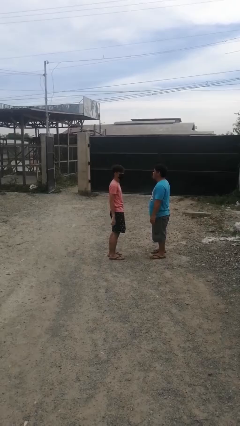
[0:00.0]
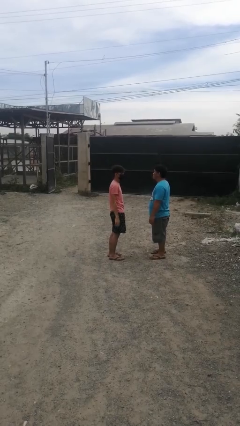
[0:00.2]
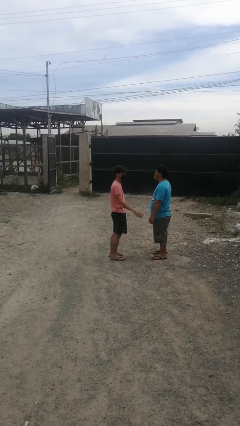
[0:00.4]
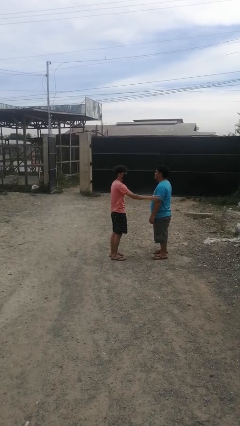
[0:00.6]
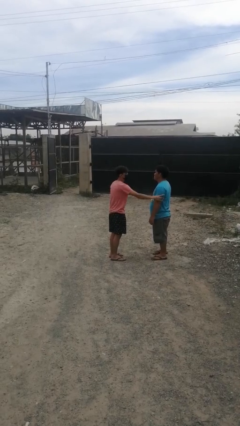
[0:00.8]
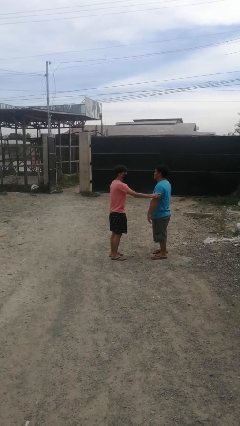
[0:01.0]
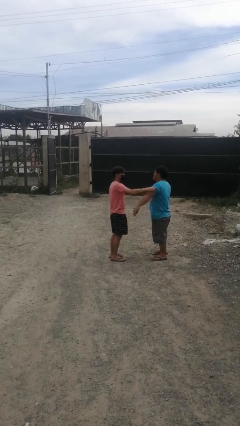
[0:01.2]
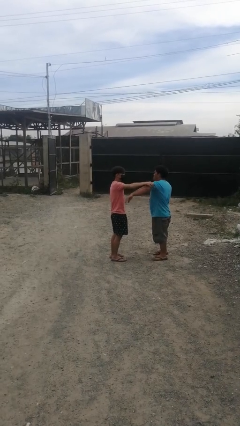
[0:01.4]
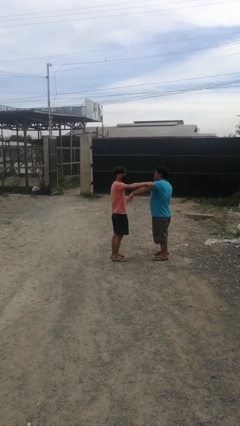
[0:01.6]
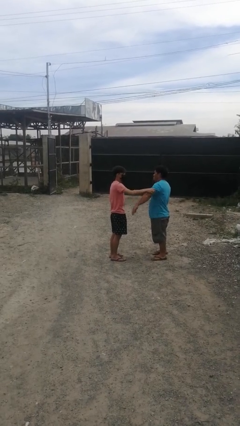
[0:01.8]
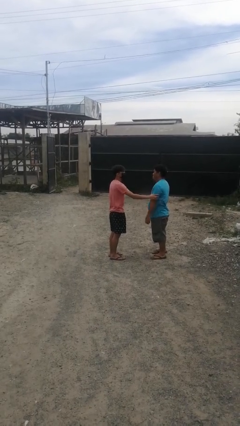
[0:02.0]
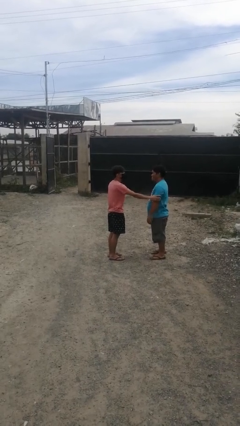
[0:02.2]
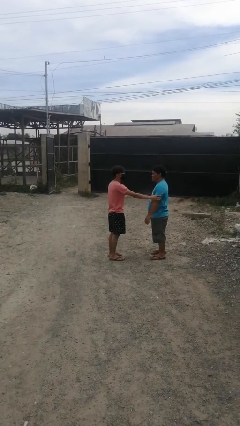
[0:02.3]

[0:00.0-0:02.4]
person grabs person by bicep

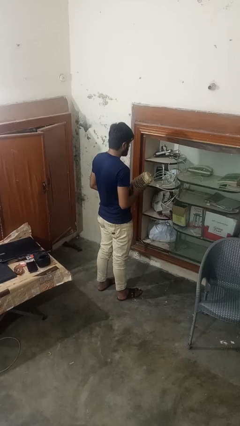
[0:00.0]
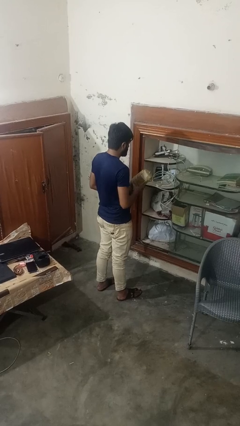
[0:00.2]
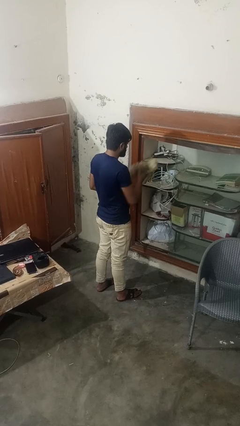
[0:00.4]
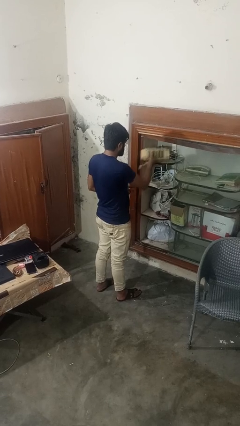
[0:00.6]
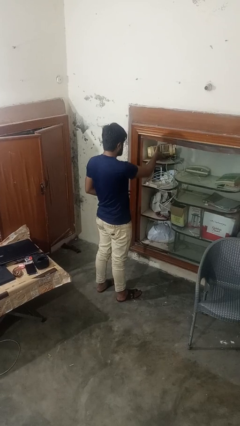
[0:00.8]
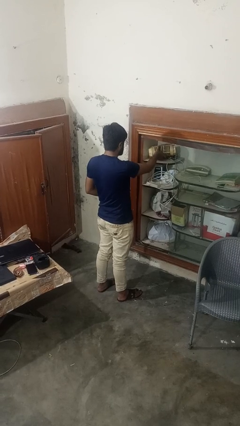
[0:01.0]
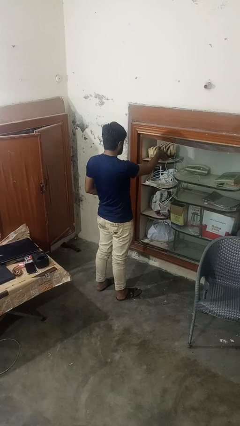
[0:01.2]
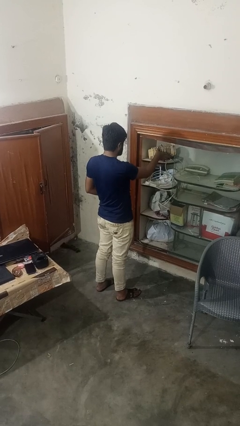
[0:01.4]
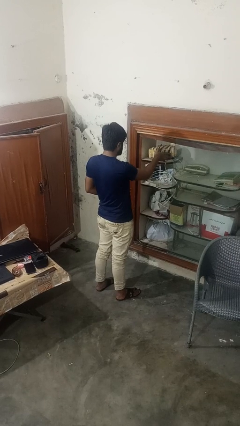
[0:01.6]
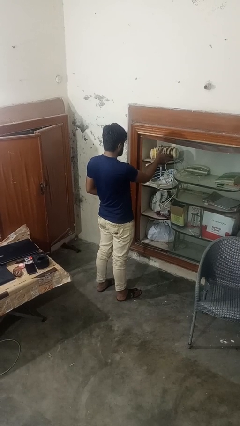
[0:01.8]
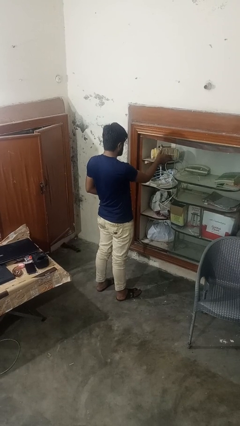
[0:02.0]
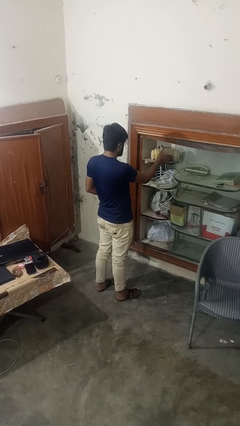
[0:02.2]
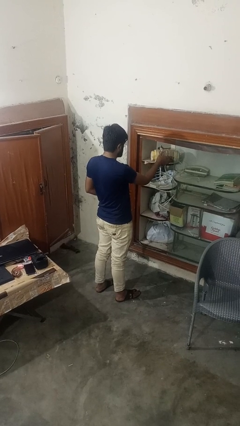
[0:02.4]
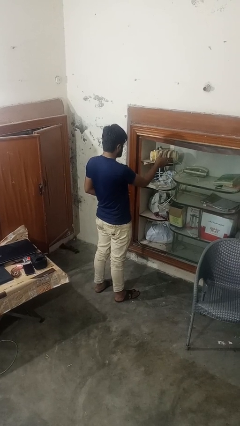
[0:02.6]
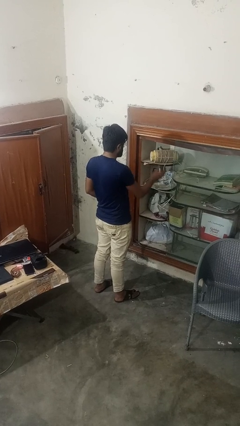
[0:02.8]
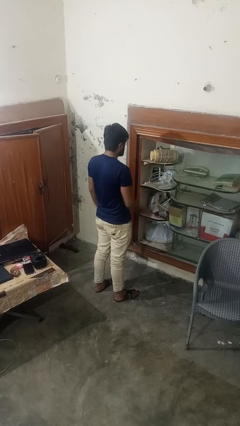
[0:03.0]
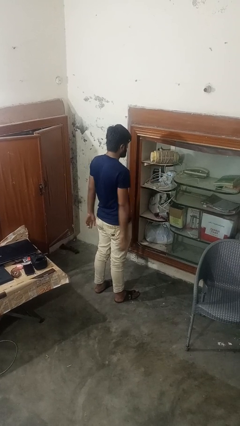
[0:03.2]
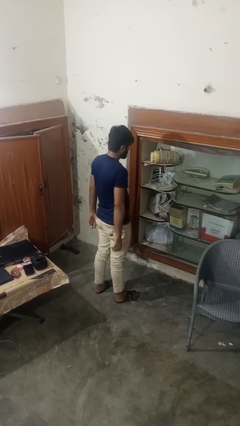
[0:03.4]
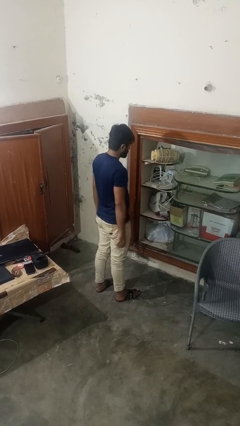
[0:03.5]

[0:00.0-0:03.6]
person puts down object on countertop

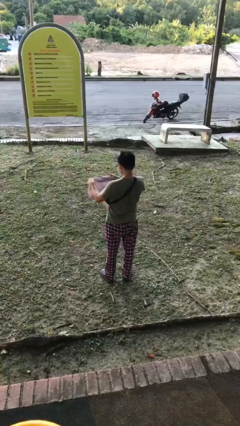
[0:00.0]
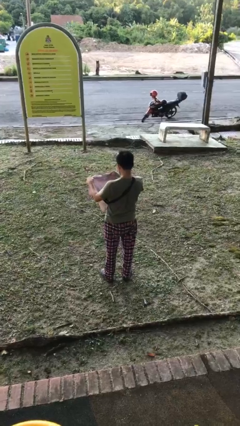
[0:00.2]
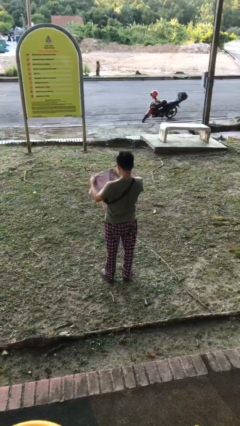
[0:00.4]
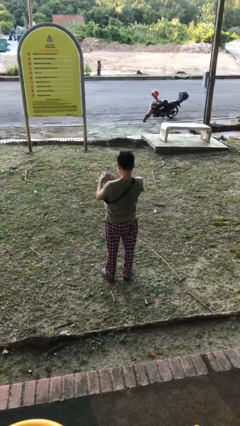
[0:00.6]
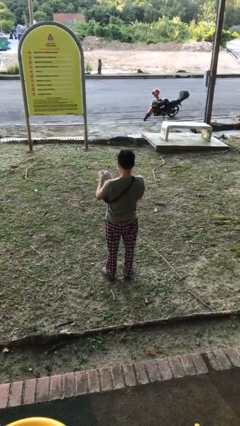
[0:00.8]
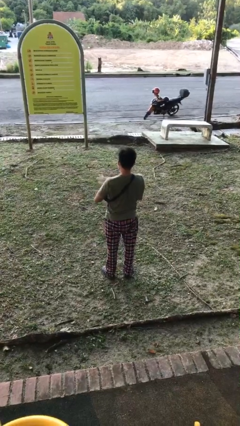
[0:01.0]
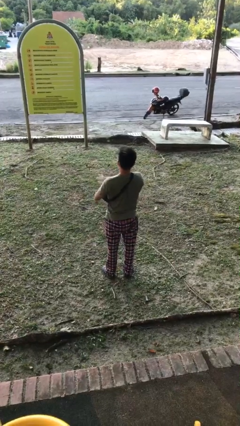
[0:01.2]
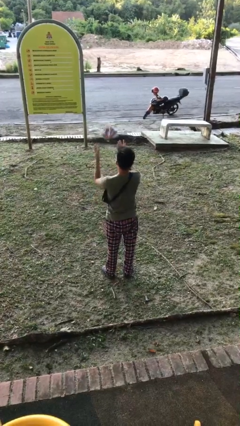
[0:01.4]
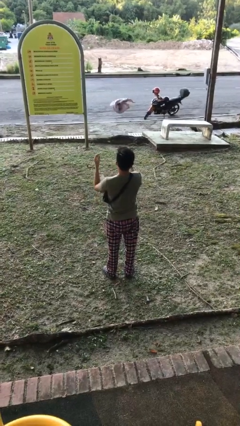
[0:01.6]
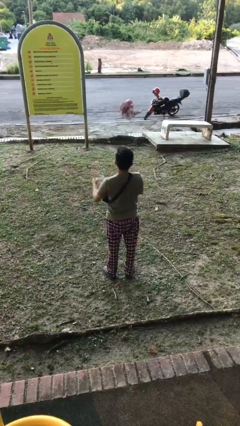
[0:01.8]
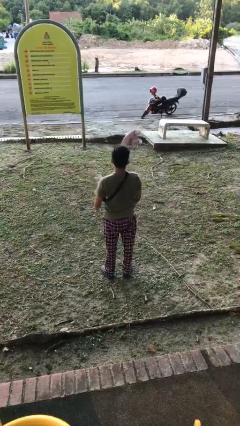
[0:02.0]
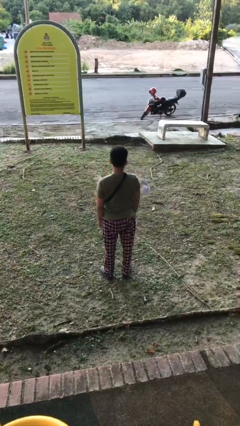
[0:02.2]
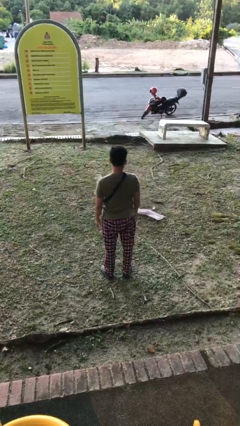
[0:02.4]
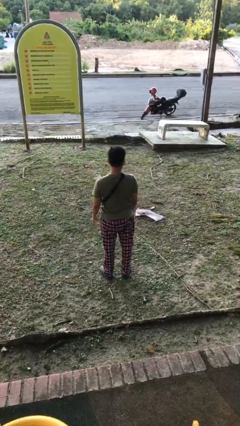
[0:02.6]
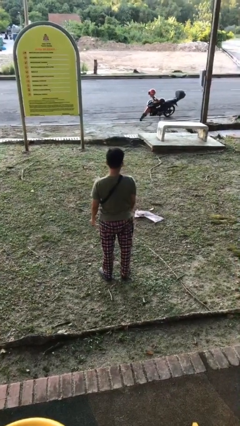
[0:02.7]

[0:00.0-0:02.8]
person throws object into air

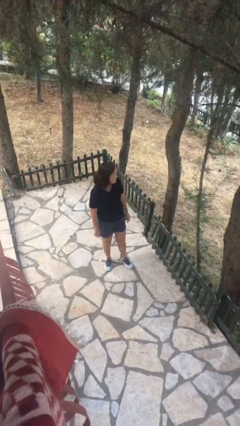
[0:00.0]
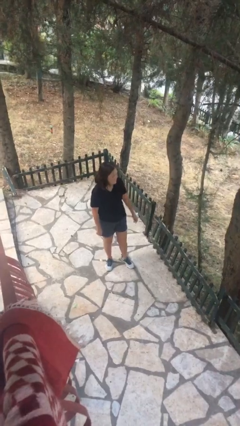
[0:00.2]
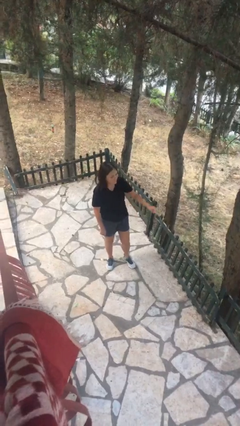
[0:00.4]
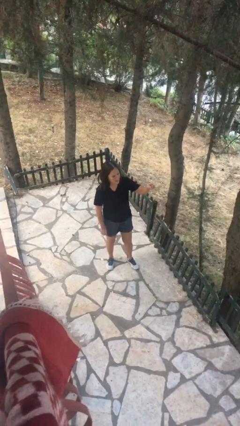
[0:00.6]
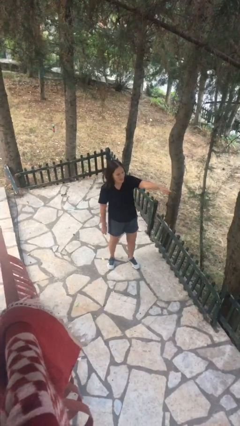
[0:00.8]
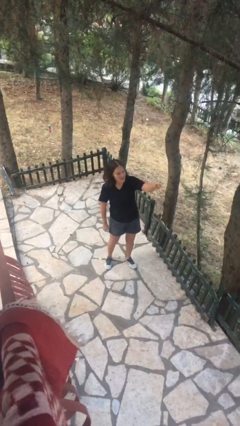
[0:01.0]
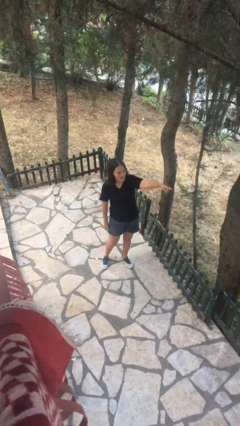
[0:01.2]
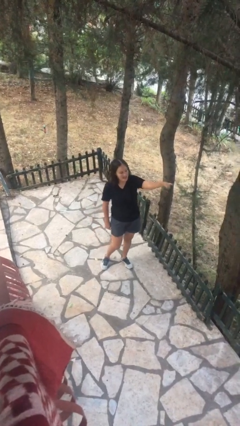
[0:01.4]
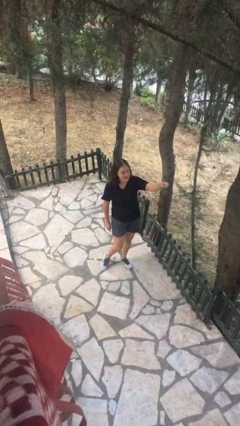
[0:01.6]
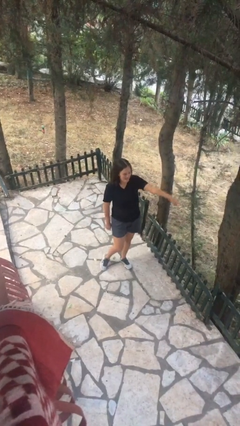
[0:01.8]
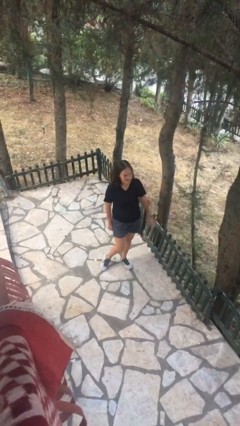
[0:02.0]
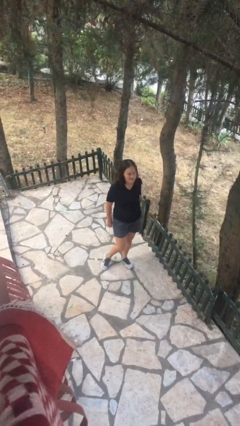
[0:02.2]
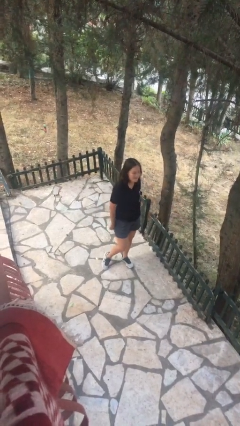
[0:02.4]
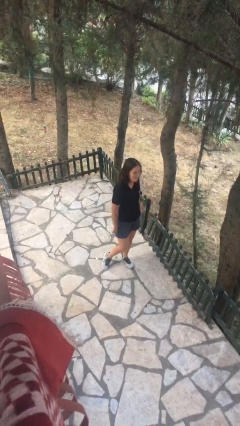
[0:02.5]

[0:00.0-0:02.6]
person points at person

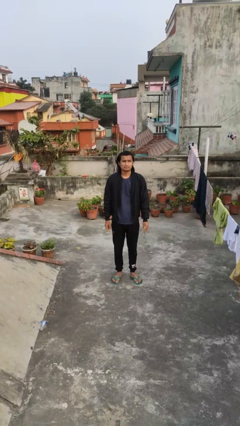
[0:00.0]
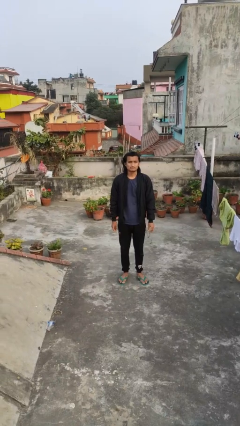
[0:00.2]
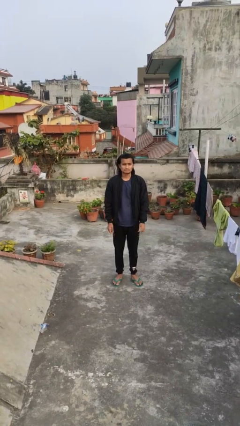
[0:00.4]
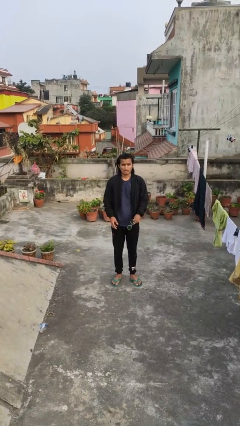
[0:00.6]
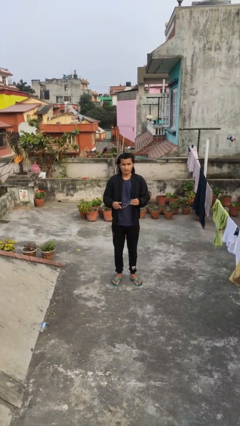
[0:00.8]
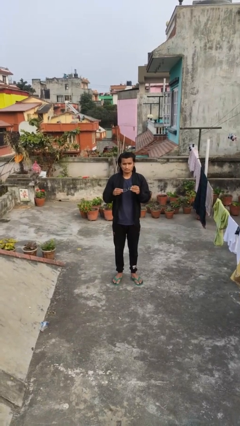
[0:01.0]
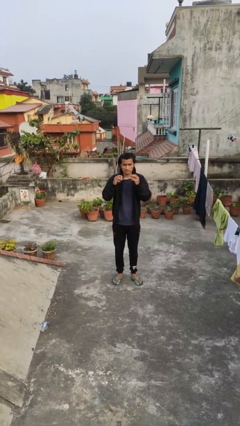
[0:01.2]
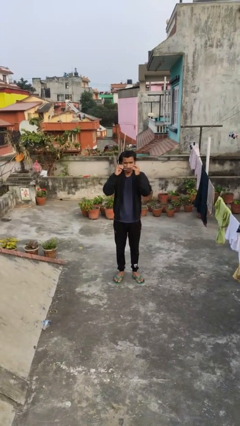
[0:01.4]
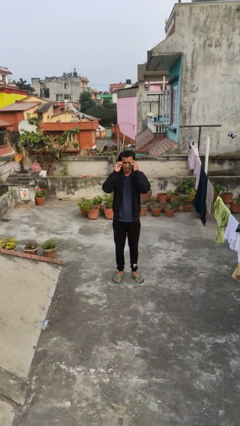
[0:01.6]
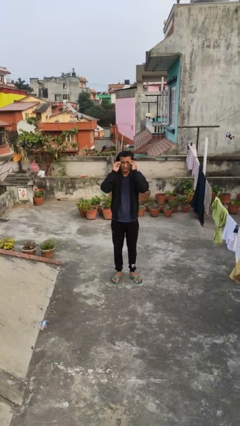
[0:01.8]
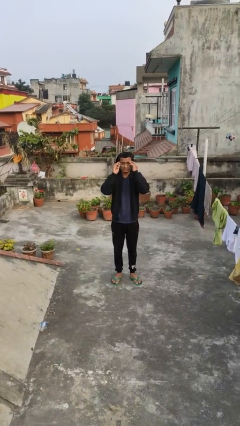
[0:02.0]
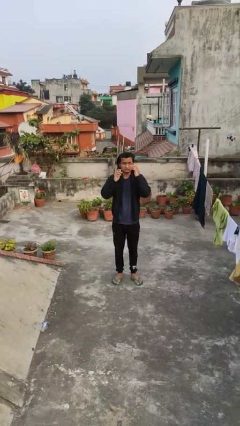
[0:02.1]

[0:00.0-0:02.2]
person puts on glasses

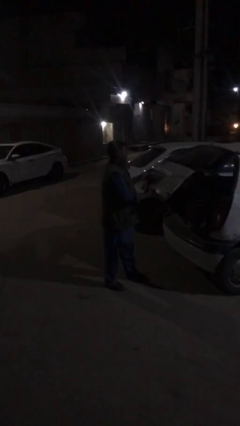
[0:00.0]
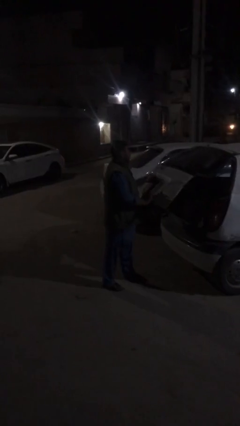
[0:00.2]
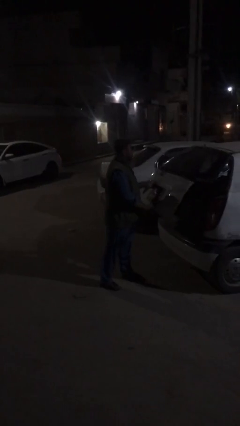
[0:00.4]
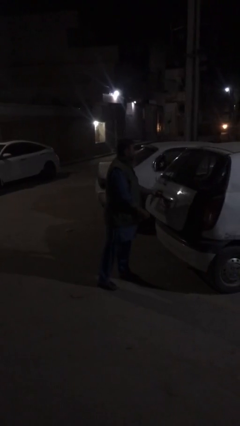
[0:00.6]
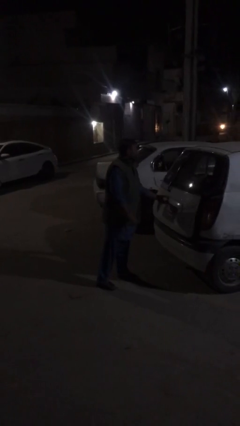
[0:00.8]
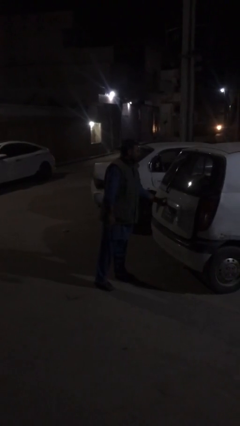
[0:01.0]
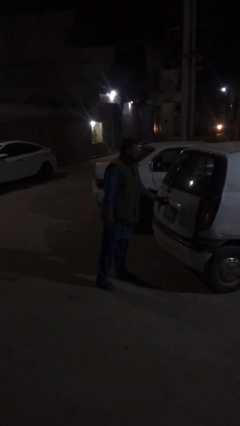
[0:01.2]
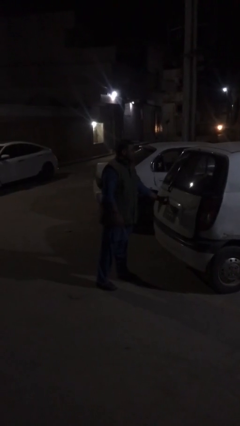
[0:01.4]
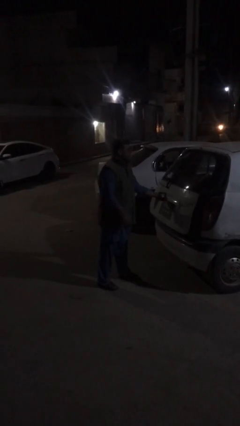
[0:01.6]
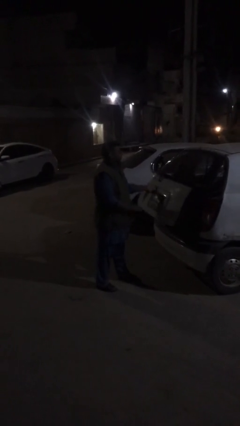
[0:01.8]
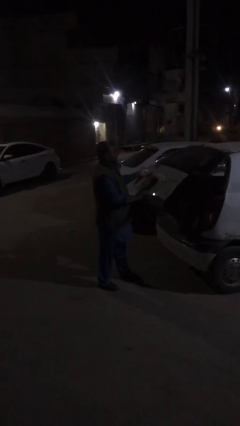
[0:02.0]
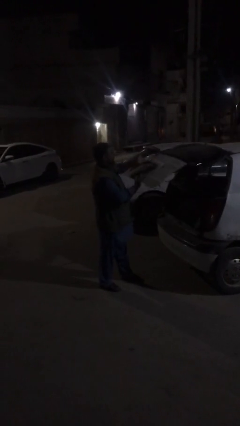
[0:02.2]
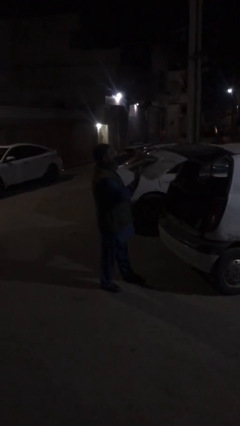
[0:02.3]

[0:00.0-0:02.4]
person closes car trunk

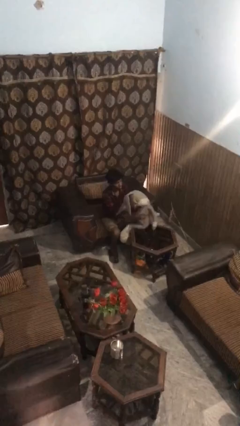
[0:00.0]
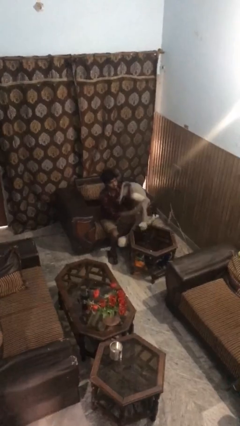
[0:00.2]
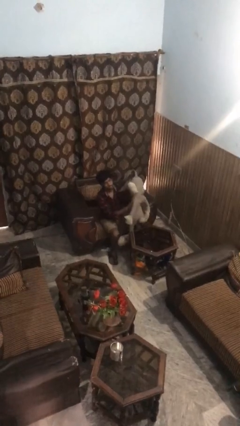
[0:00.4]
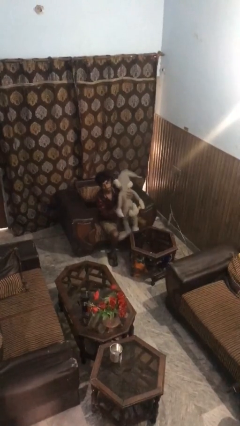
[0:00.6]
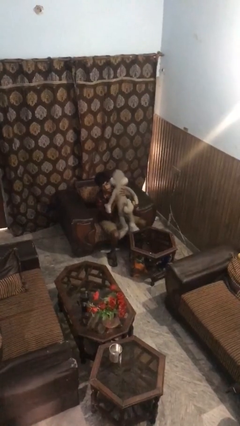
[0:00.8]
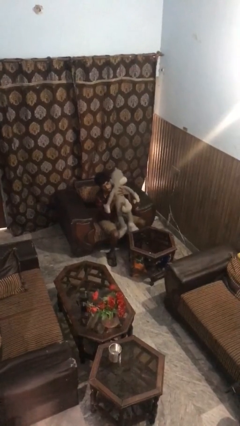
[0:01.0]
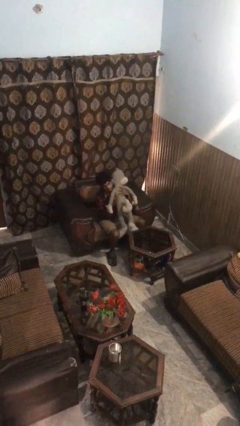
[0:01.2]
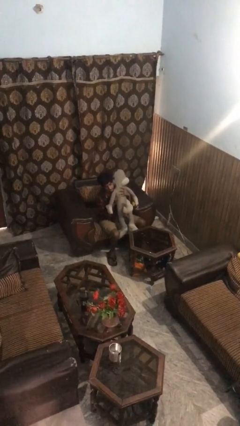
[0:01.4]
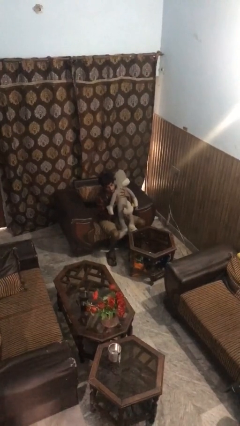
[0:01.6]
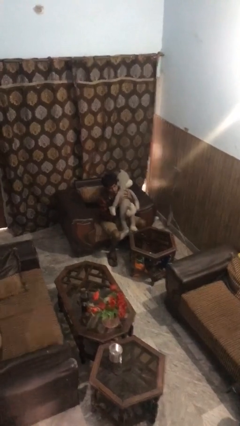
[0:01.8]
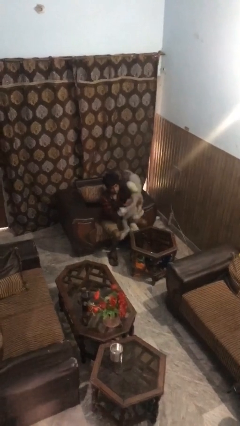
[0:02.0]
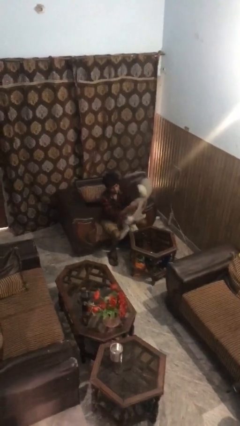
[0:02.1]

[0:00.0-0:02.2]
person hugs stuffed animal
